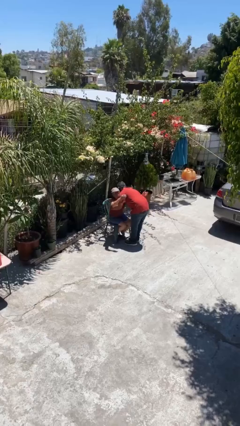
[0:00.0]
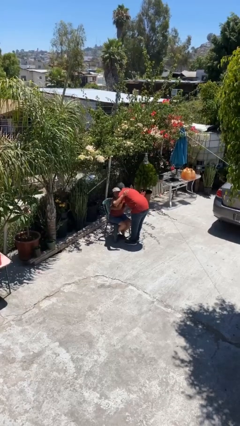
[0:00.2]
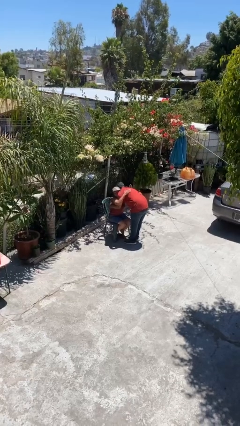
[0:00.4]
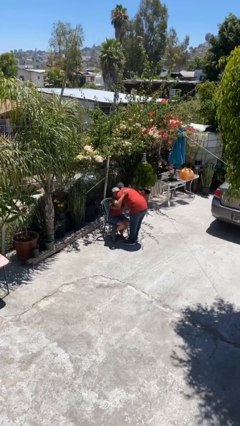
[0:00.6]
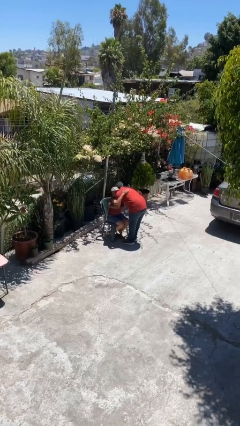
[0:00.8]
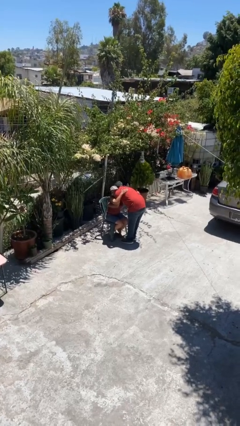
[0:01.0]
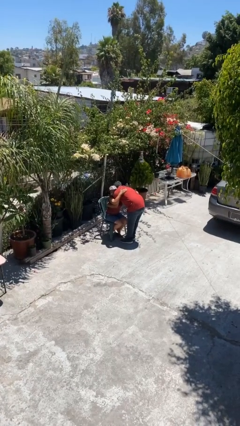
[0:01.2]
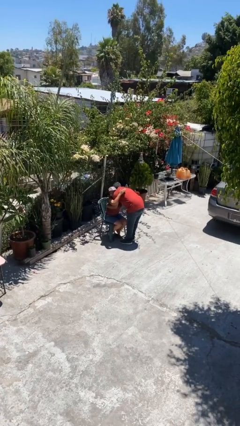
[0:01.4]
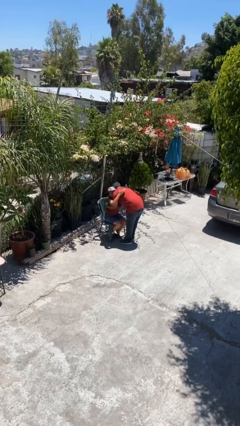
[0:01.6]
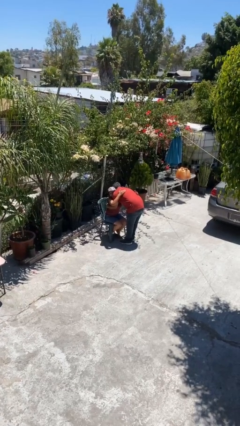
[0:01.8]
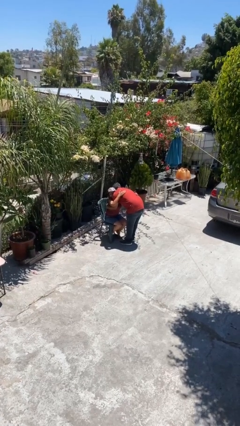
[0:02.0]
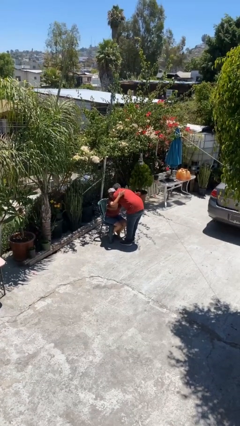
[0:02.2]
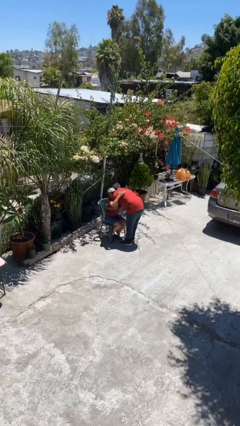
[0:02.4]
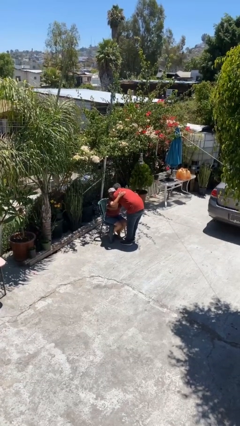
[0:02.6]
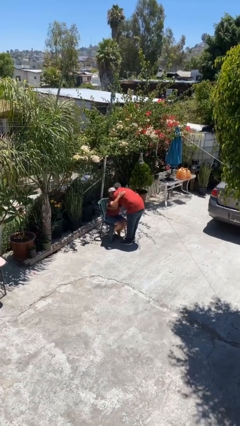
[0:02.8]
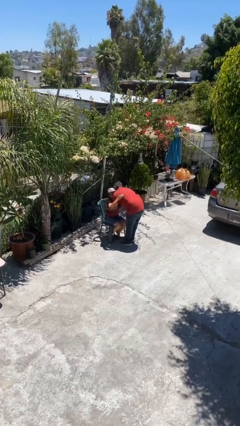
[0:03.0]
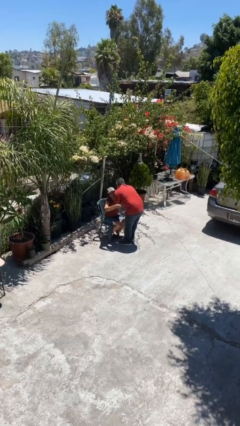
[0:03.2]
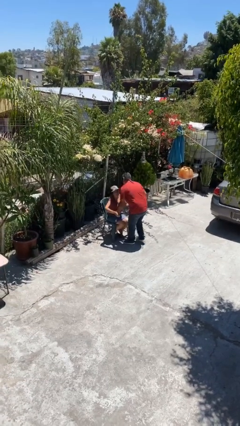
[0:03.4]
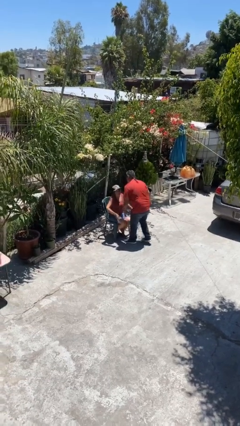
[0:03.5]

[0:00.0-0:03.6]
person embraces person

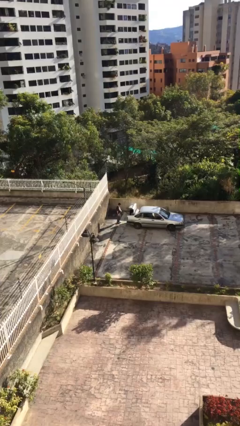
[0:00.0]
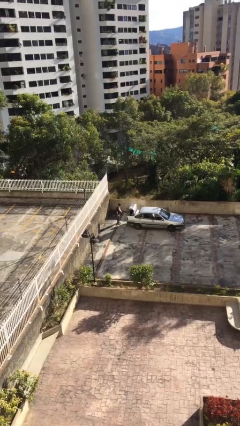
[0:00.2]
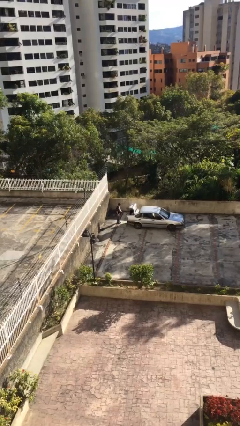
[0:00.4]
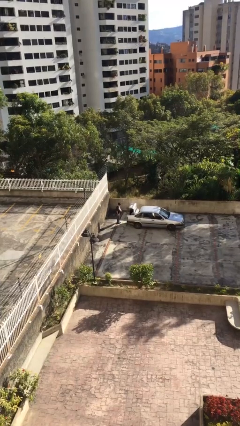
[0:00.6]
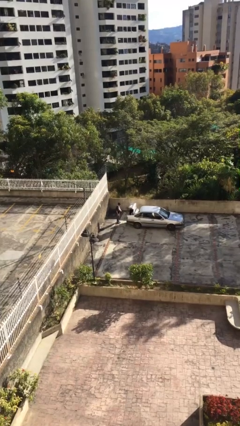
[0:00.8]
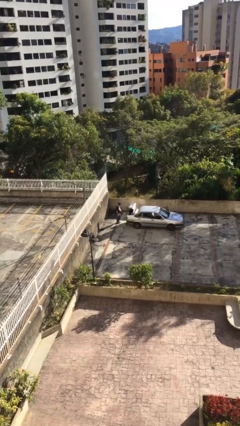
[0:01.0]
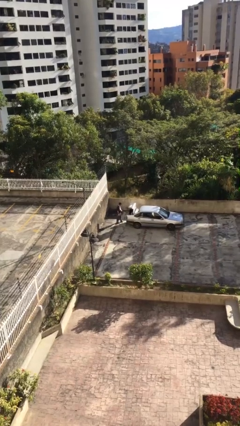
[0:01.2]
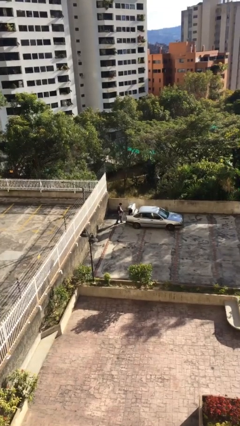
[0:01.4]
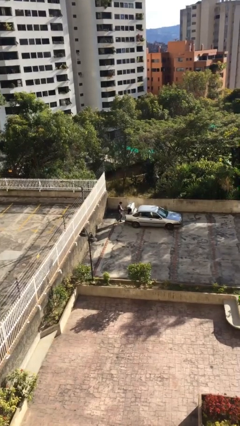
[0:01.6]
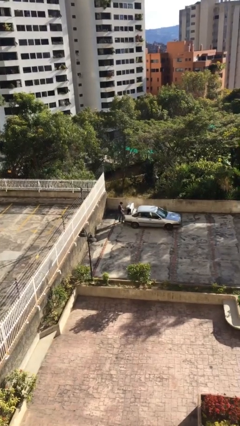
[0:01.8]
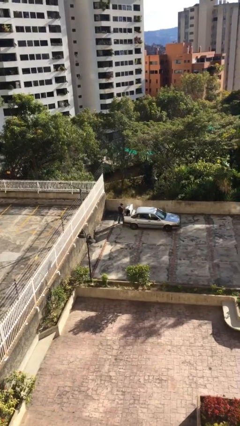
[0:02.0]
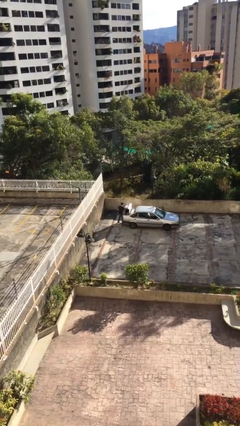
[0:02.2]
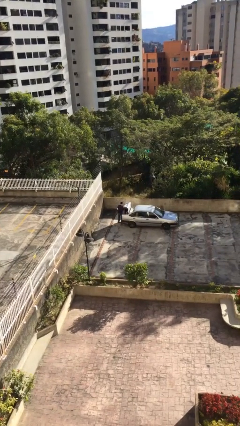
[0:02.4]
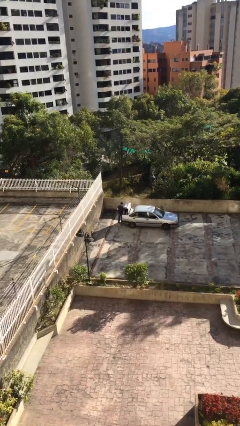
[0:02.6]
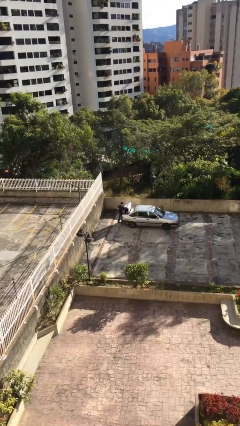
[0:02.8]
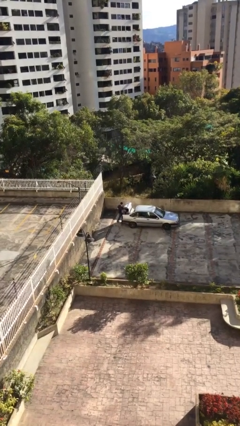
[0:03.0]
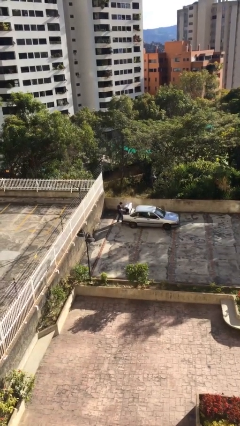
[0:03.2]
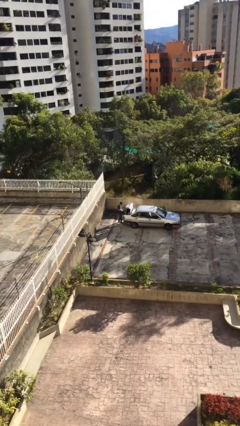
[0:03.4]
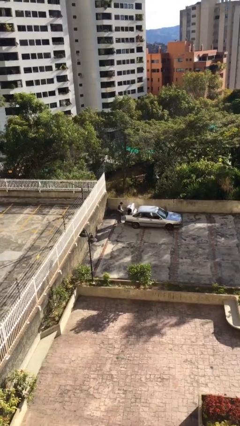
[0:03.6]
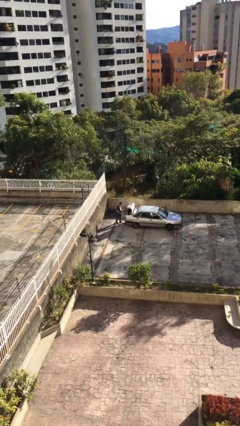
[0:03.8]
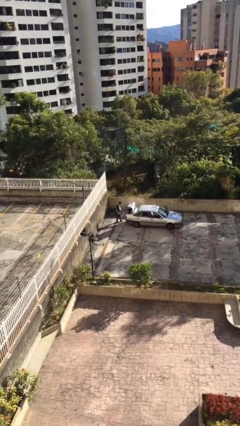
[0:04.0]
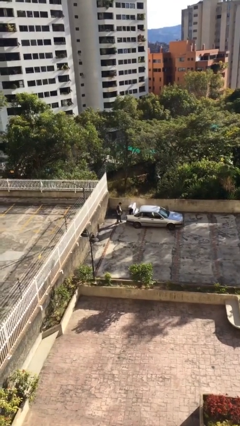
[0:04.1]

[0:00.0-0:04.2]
person unloads car

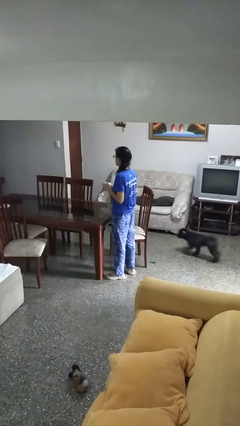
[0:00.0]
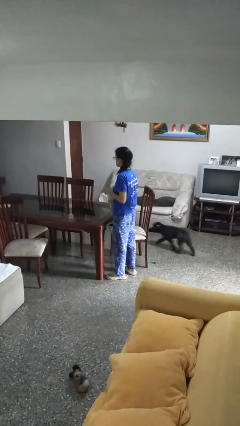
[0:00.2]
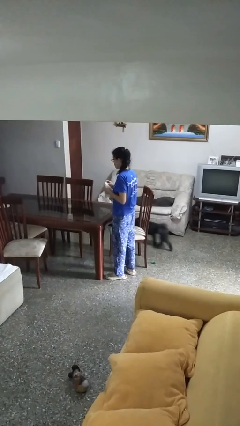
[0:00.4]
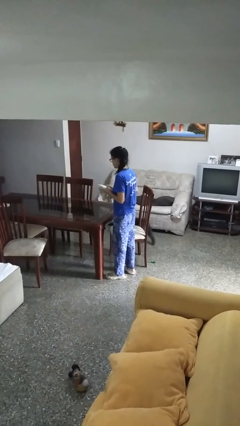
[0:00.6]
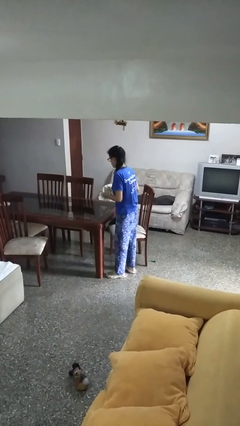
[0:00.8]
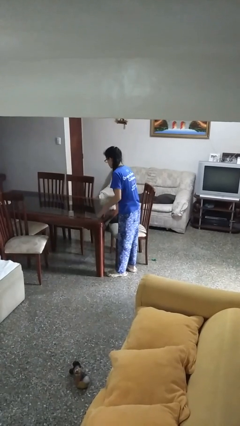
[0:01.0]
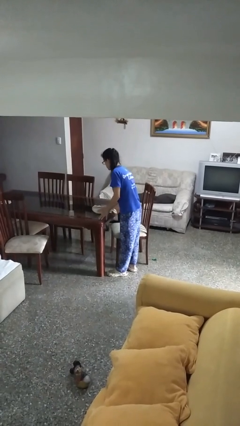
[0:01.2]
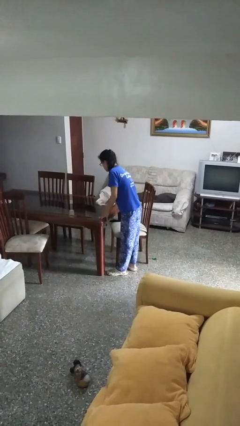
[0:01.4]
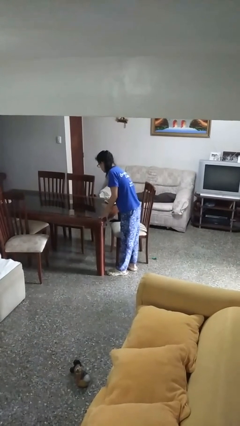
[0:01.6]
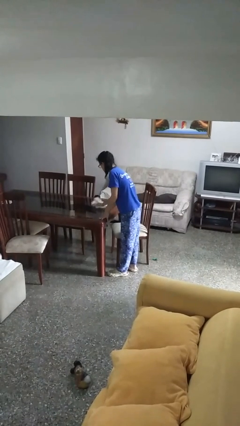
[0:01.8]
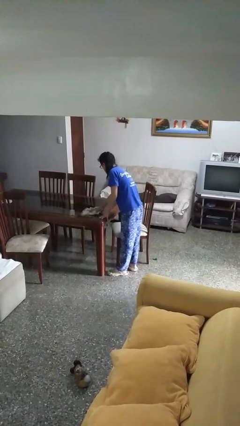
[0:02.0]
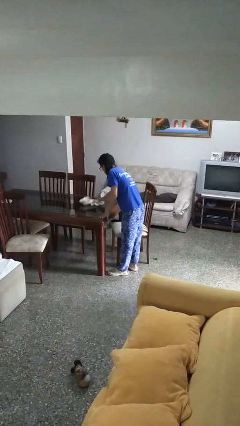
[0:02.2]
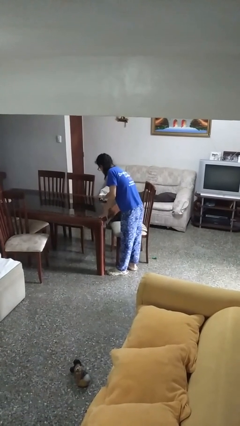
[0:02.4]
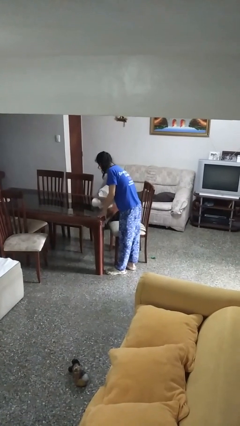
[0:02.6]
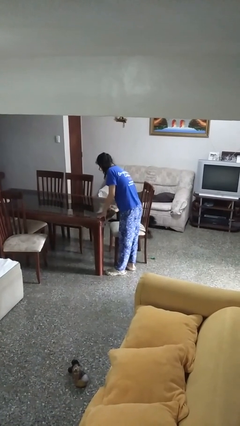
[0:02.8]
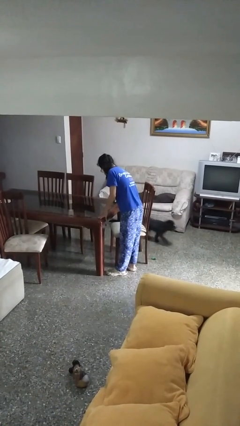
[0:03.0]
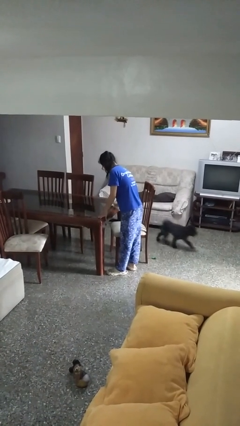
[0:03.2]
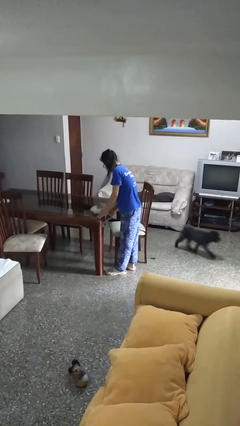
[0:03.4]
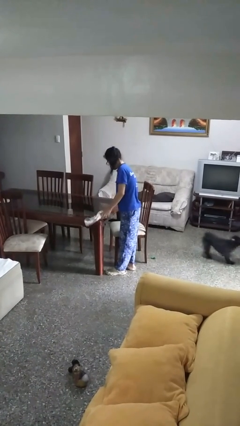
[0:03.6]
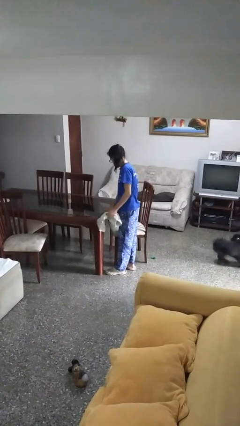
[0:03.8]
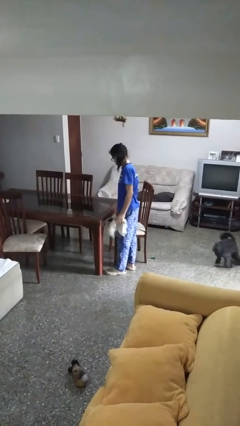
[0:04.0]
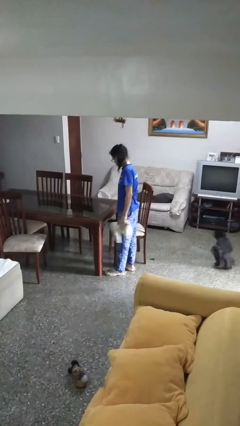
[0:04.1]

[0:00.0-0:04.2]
person cleans table with rag

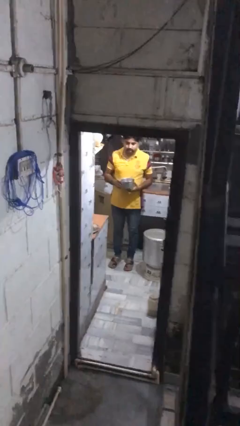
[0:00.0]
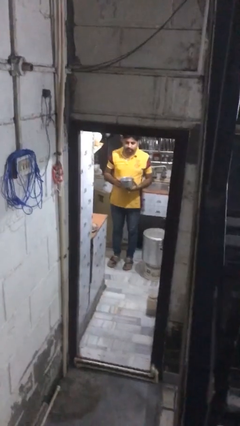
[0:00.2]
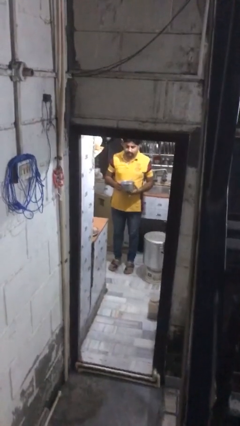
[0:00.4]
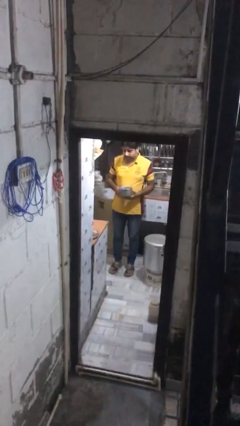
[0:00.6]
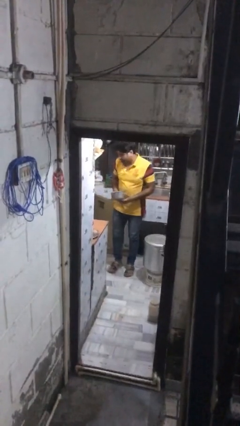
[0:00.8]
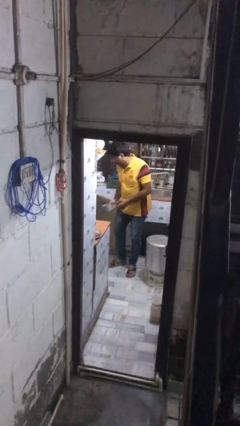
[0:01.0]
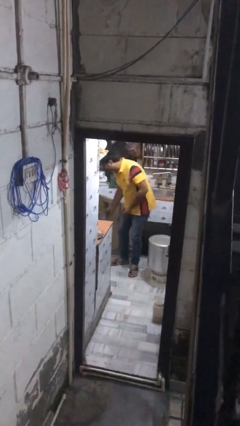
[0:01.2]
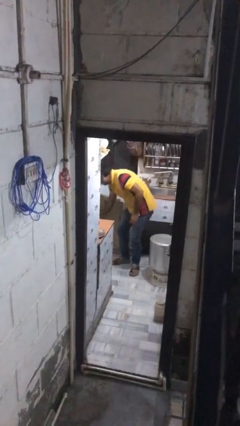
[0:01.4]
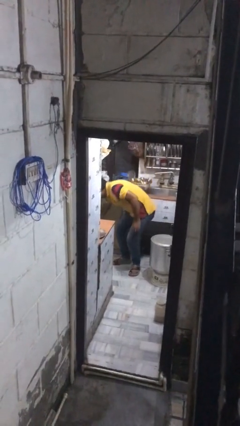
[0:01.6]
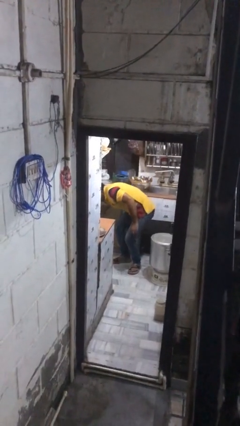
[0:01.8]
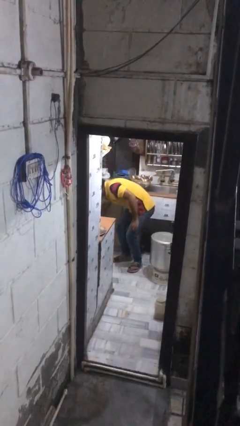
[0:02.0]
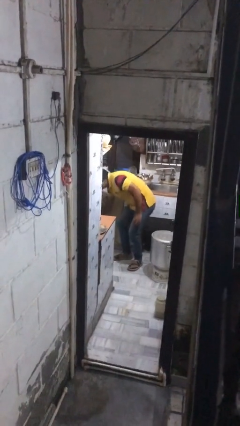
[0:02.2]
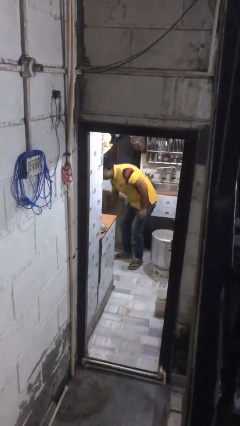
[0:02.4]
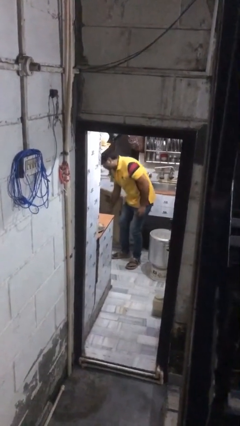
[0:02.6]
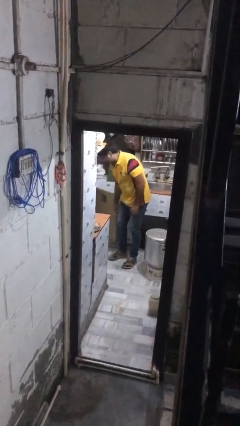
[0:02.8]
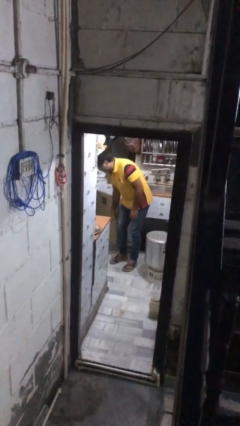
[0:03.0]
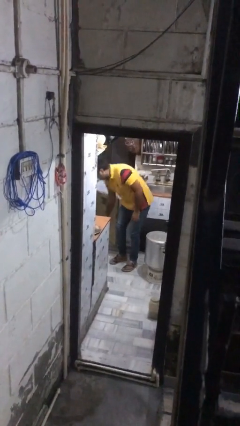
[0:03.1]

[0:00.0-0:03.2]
person puts object into kitchen drawer

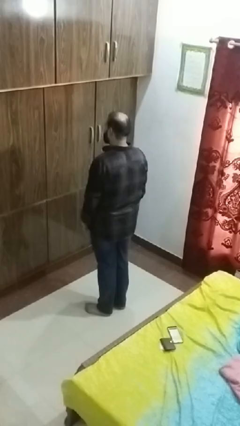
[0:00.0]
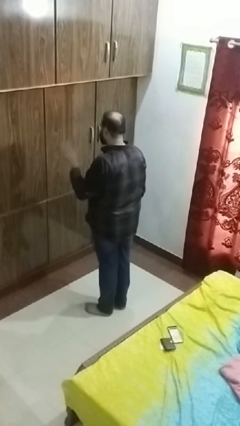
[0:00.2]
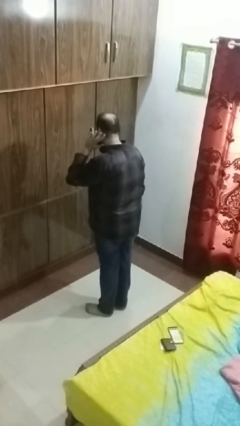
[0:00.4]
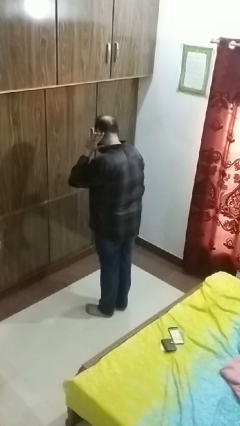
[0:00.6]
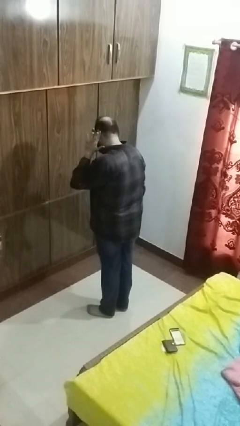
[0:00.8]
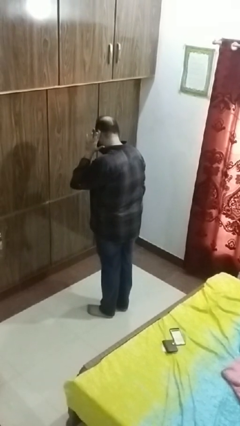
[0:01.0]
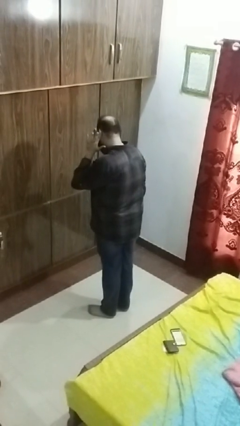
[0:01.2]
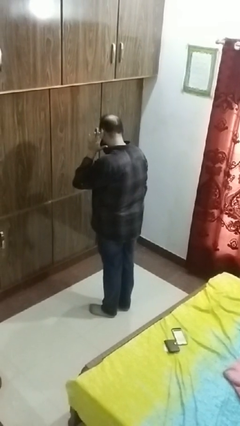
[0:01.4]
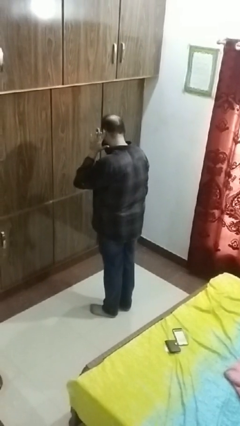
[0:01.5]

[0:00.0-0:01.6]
person gestures listen closely

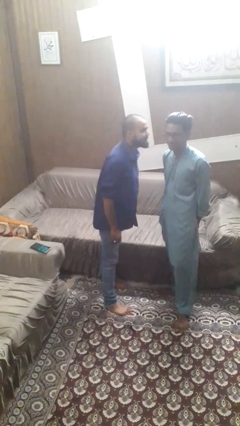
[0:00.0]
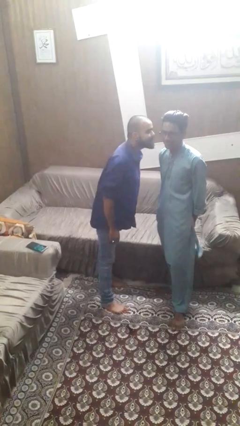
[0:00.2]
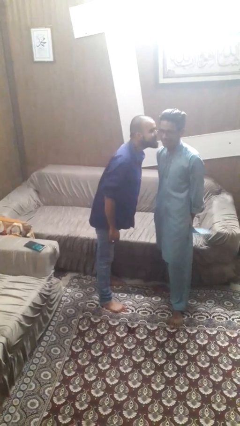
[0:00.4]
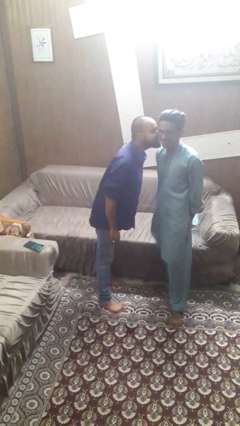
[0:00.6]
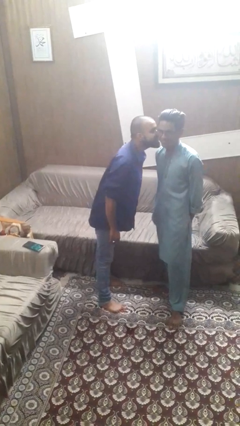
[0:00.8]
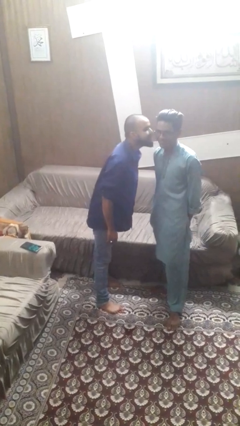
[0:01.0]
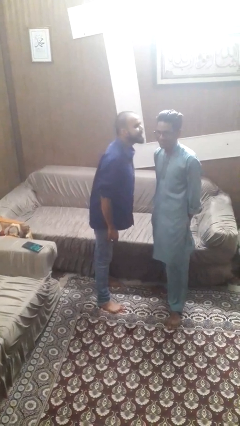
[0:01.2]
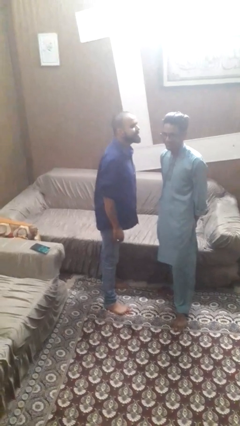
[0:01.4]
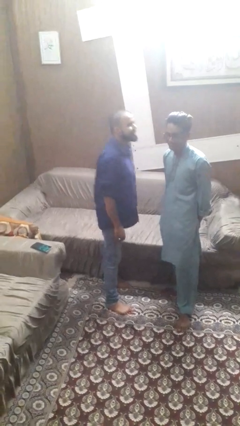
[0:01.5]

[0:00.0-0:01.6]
person kisses cheek of person
